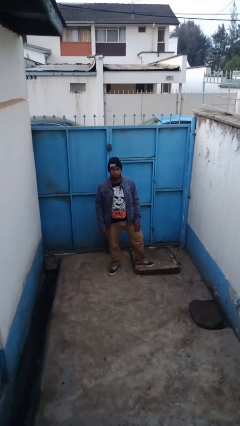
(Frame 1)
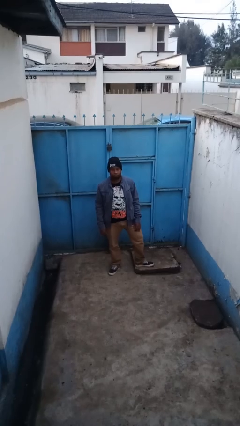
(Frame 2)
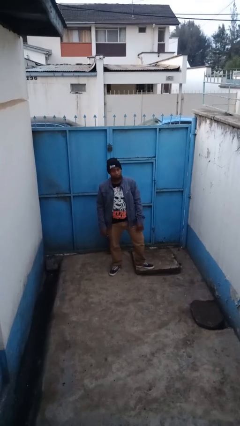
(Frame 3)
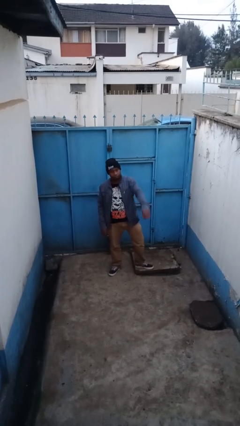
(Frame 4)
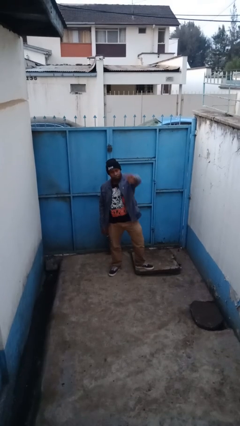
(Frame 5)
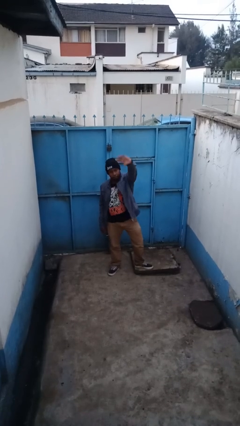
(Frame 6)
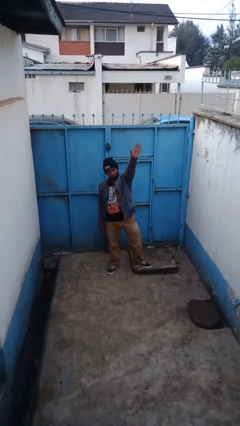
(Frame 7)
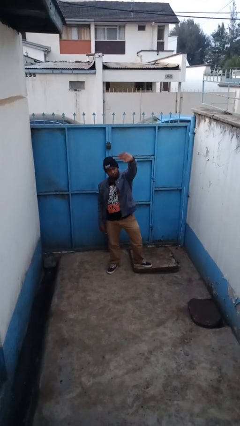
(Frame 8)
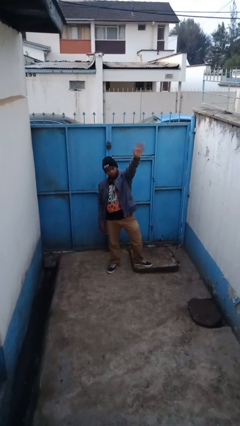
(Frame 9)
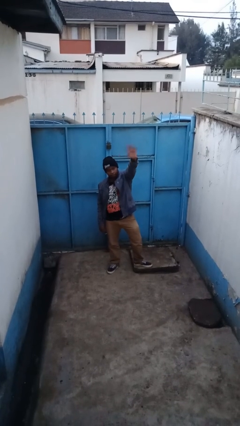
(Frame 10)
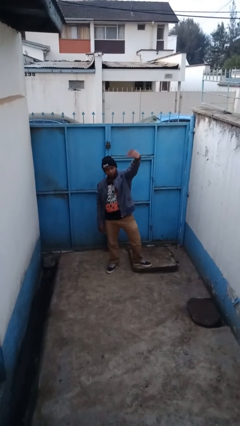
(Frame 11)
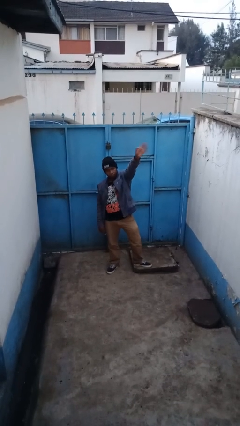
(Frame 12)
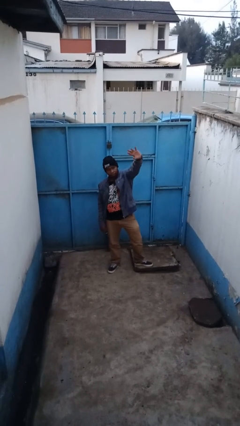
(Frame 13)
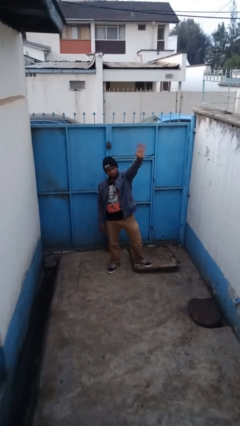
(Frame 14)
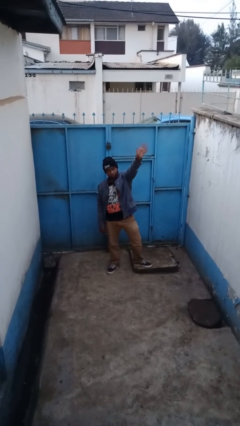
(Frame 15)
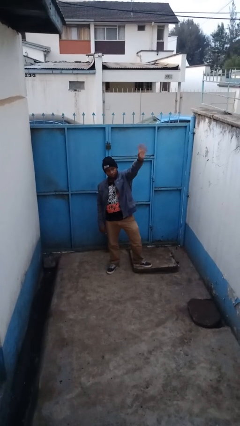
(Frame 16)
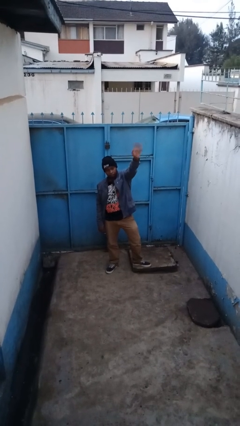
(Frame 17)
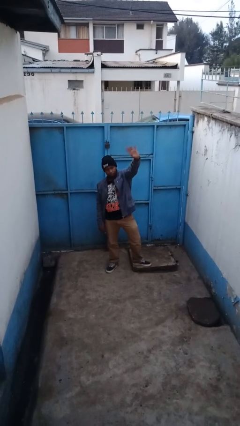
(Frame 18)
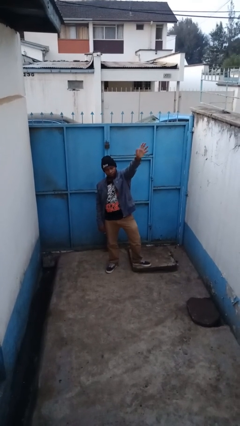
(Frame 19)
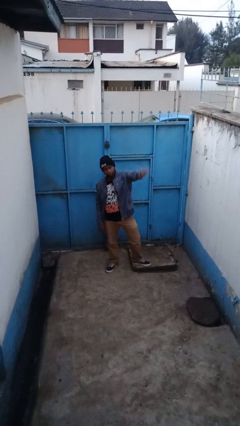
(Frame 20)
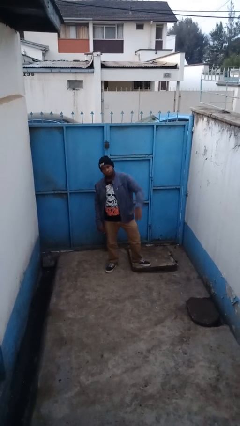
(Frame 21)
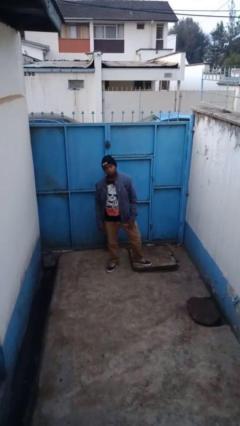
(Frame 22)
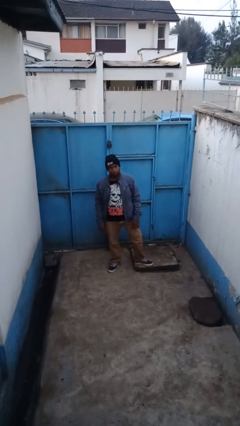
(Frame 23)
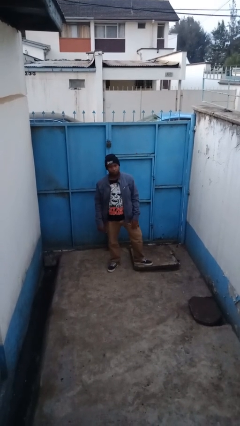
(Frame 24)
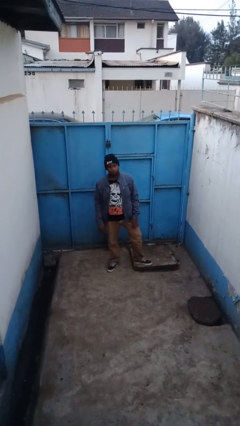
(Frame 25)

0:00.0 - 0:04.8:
person waves at person

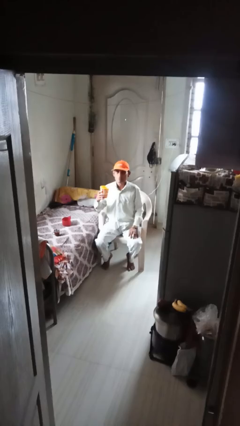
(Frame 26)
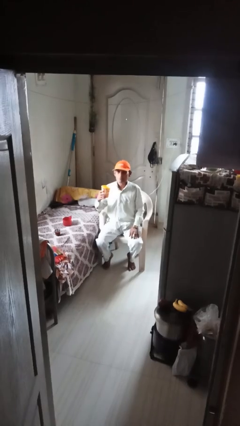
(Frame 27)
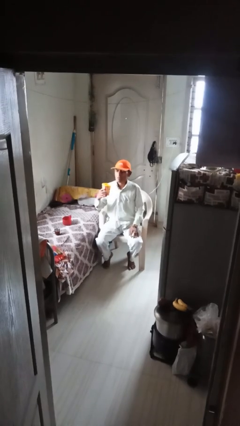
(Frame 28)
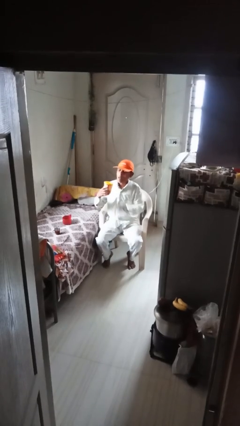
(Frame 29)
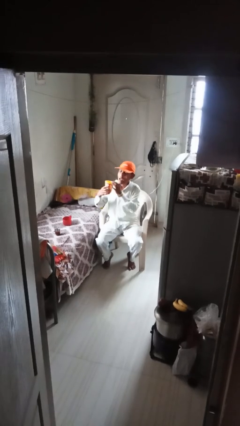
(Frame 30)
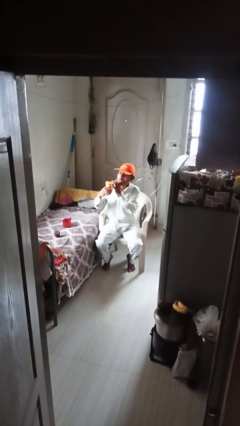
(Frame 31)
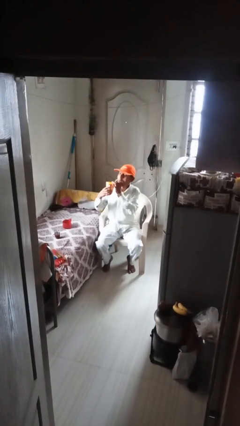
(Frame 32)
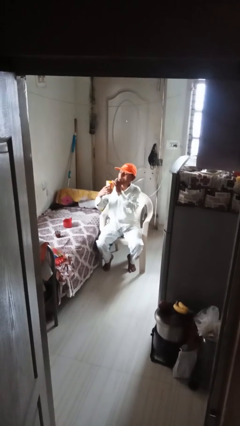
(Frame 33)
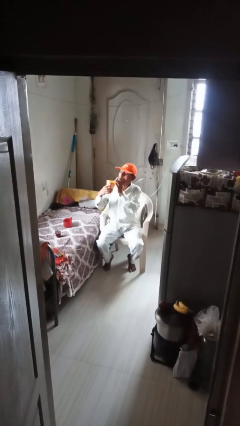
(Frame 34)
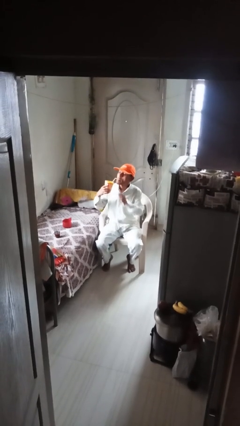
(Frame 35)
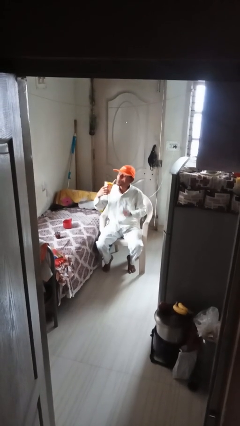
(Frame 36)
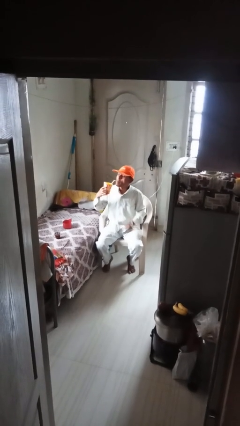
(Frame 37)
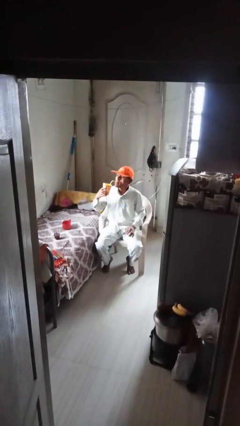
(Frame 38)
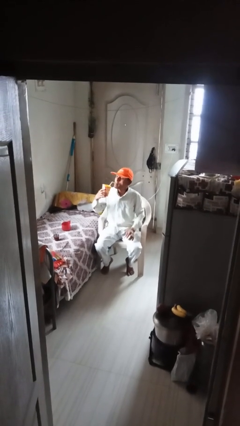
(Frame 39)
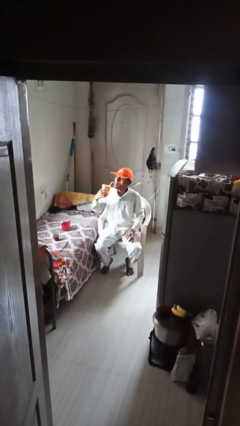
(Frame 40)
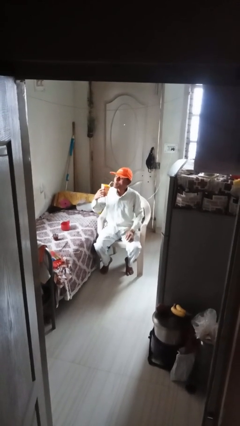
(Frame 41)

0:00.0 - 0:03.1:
person drinks from straw

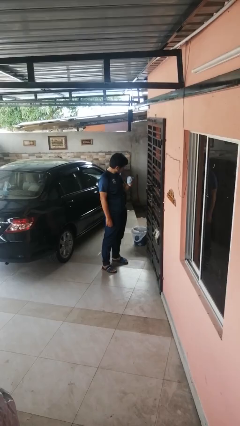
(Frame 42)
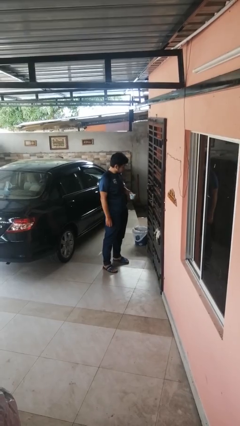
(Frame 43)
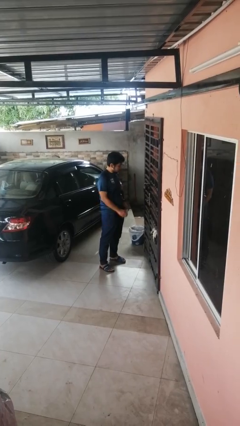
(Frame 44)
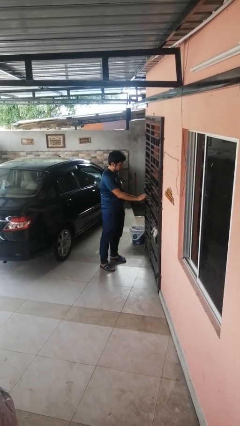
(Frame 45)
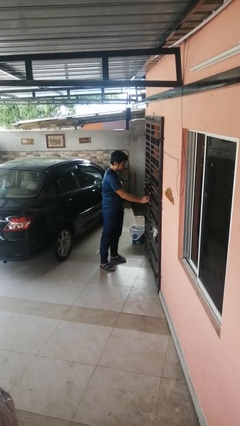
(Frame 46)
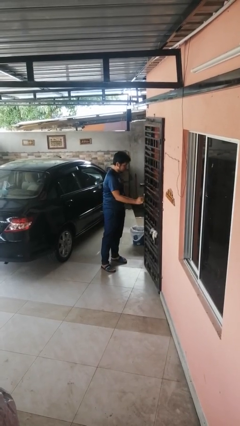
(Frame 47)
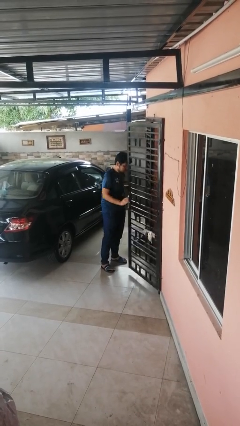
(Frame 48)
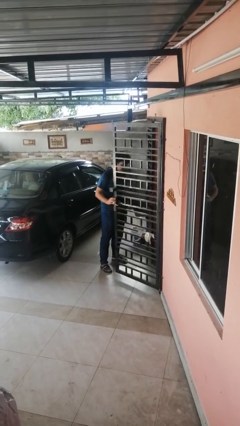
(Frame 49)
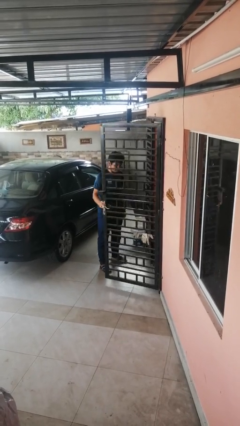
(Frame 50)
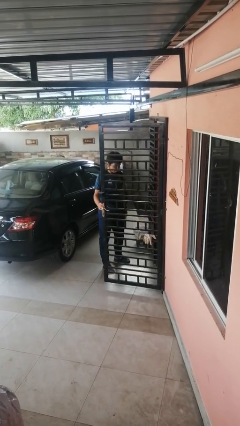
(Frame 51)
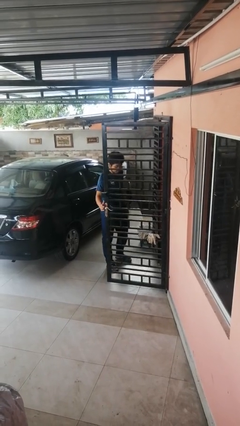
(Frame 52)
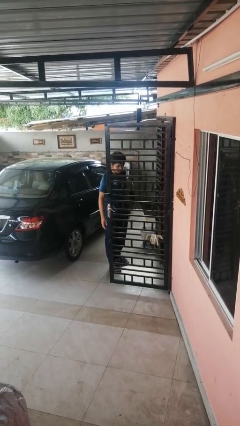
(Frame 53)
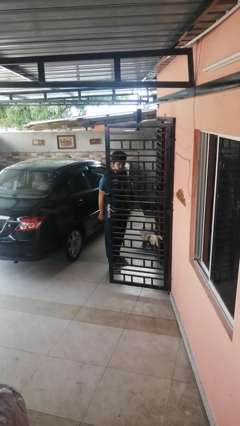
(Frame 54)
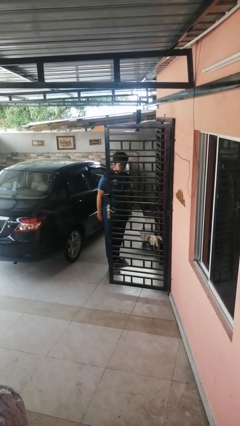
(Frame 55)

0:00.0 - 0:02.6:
person opens gate

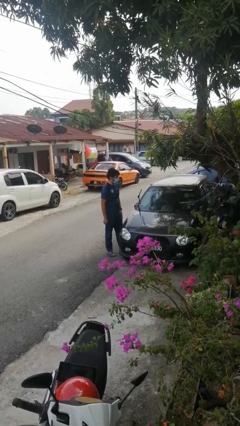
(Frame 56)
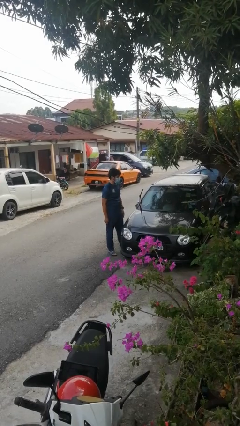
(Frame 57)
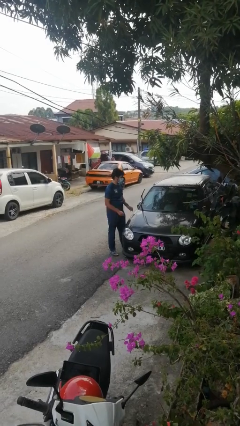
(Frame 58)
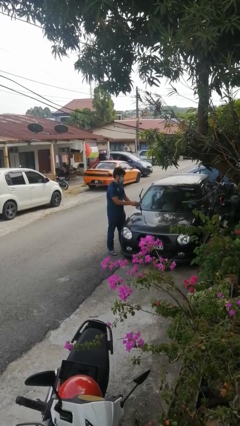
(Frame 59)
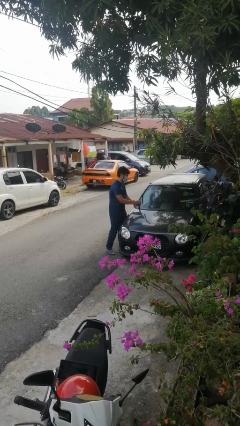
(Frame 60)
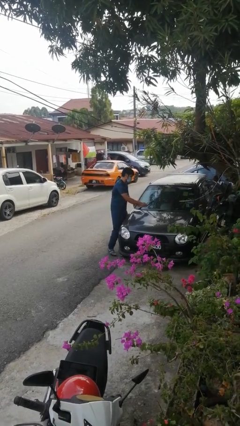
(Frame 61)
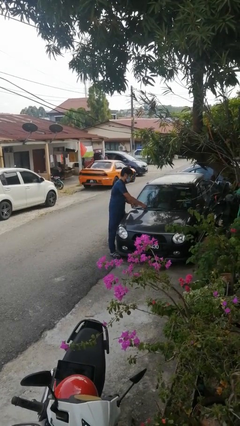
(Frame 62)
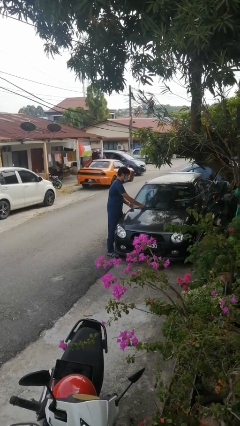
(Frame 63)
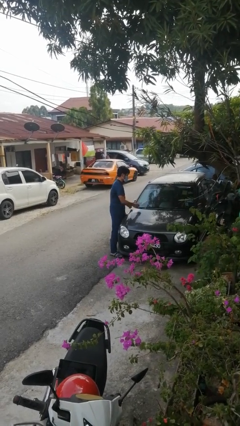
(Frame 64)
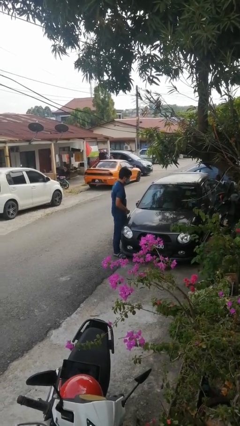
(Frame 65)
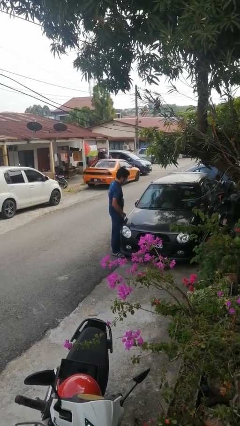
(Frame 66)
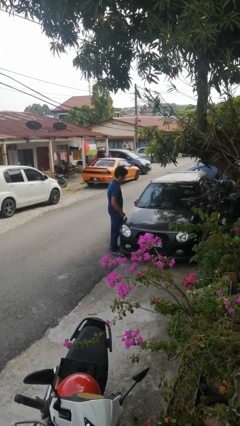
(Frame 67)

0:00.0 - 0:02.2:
person flips down car wipers

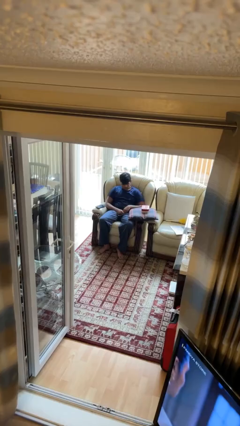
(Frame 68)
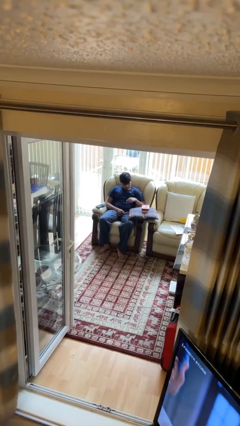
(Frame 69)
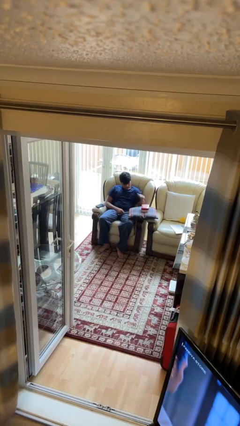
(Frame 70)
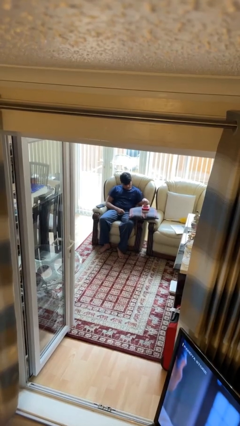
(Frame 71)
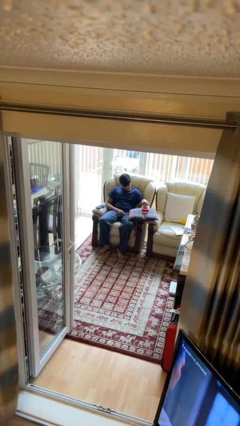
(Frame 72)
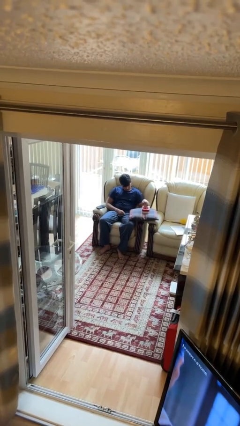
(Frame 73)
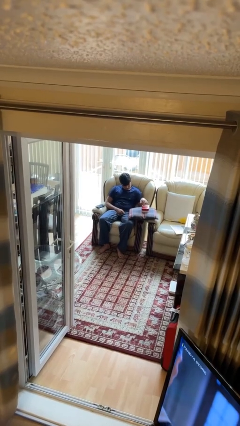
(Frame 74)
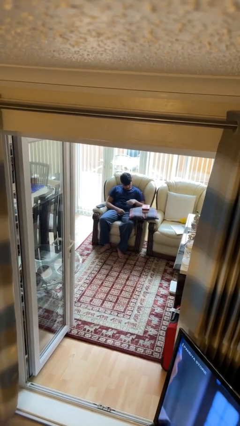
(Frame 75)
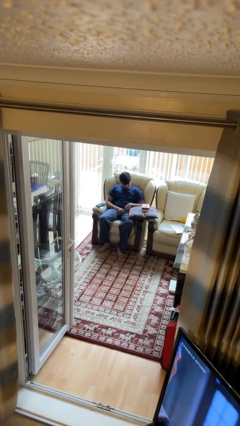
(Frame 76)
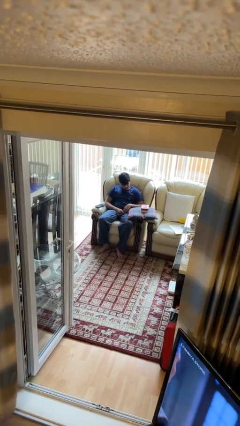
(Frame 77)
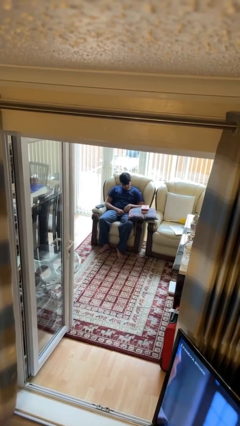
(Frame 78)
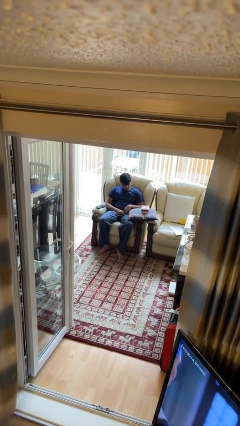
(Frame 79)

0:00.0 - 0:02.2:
person taps object with finger

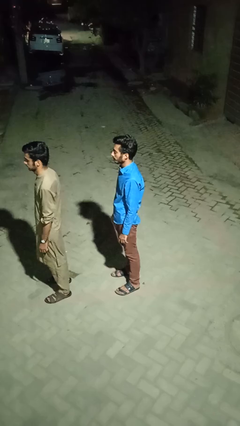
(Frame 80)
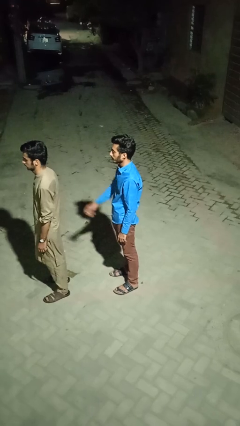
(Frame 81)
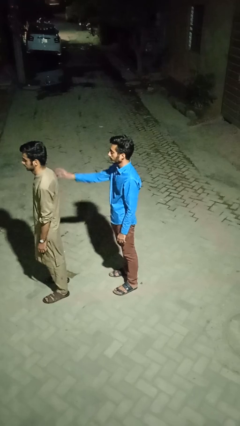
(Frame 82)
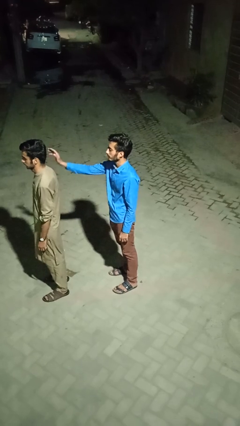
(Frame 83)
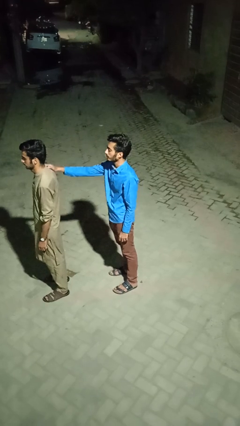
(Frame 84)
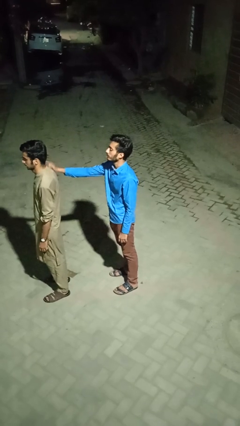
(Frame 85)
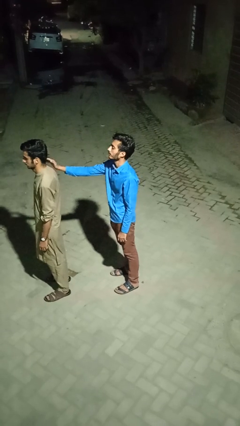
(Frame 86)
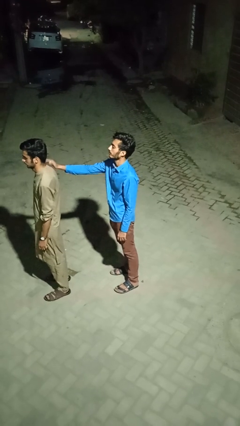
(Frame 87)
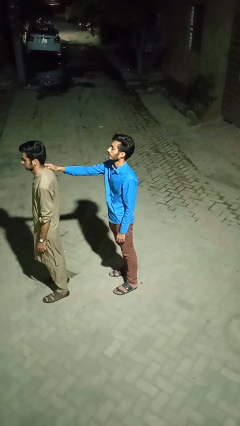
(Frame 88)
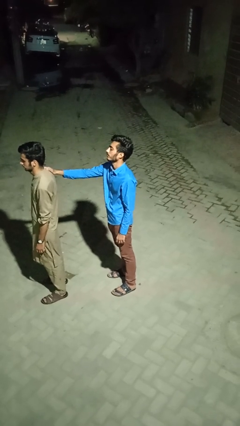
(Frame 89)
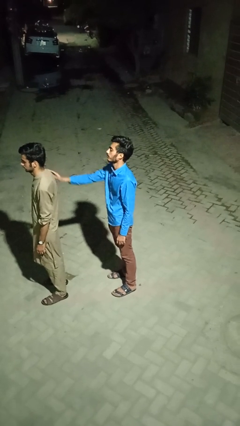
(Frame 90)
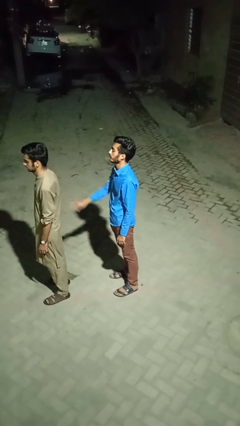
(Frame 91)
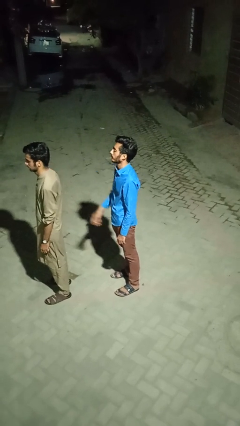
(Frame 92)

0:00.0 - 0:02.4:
person touches back of person

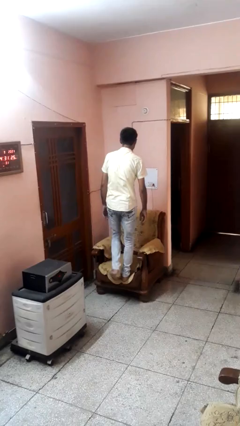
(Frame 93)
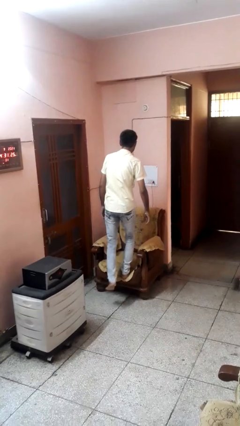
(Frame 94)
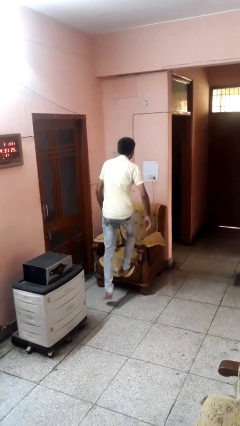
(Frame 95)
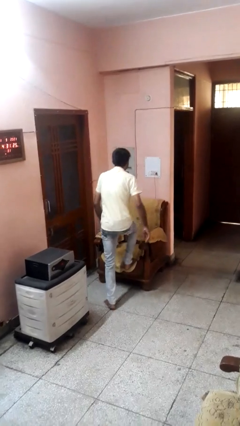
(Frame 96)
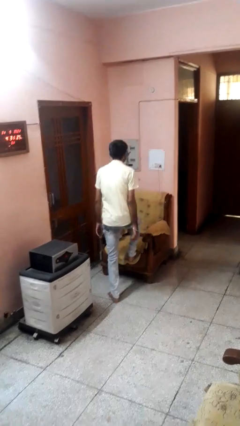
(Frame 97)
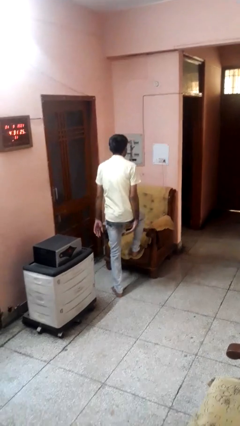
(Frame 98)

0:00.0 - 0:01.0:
person climbs off couch
